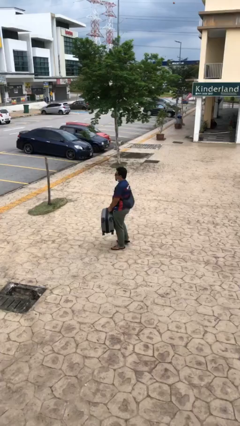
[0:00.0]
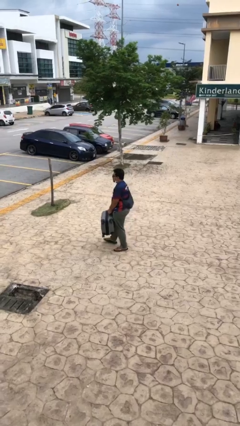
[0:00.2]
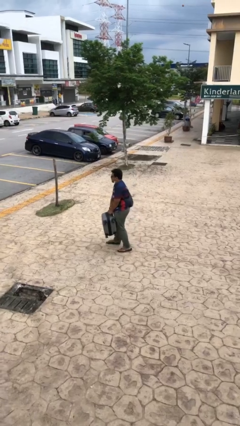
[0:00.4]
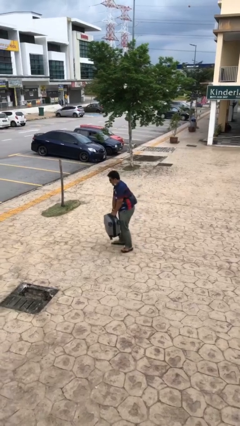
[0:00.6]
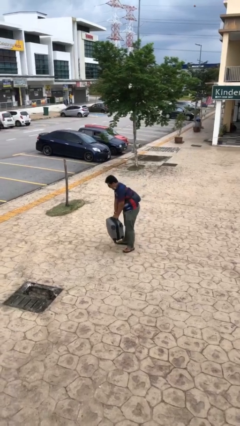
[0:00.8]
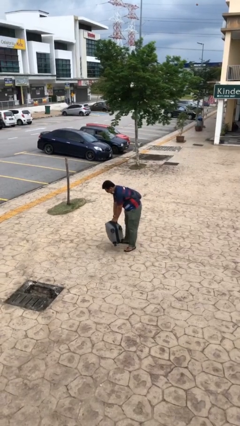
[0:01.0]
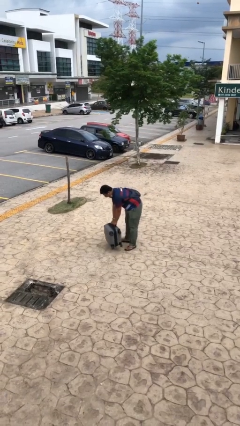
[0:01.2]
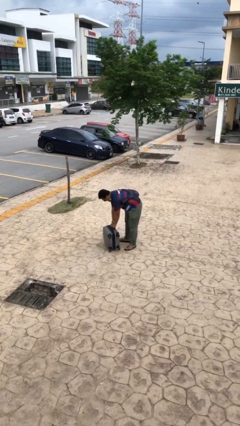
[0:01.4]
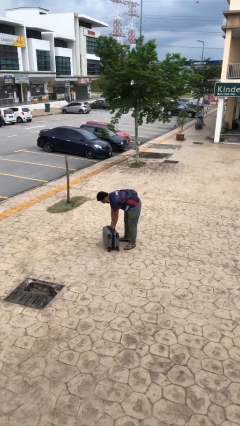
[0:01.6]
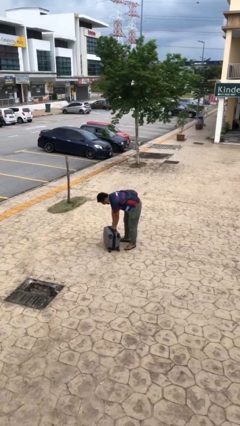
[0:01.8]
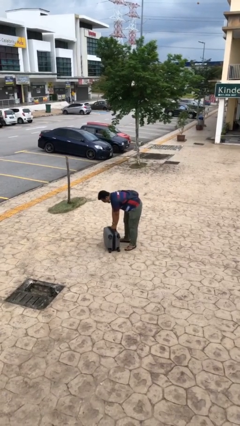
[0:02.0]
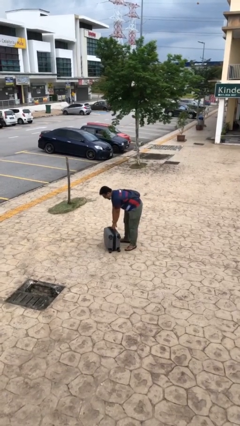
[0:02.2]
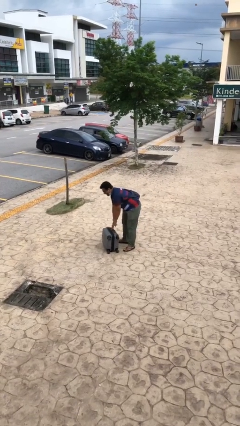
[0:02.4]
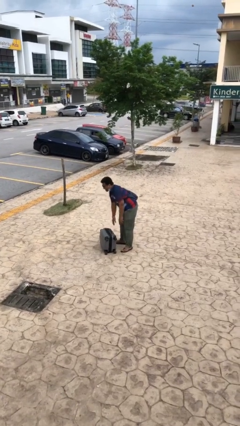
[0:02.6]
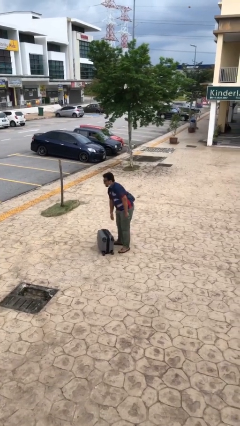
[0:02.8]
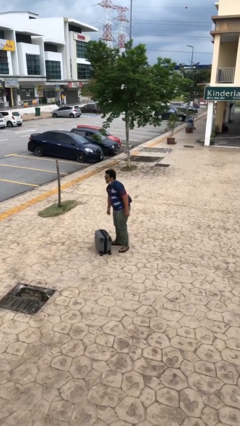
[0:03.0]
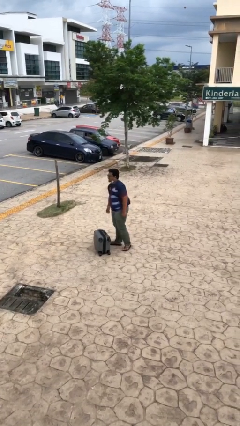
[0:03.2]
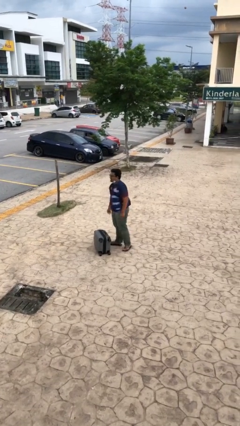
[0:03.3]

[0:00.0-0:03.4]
person puts down object on floor

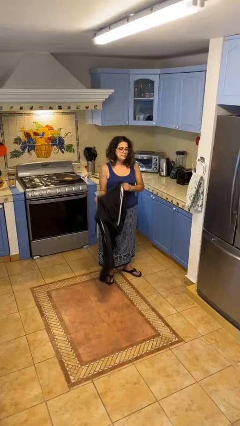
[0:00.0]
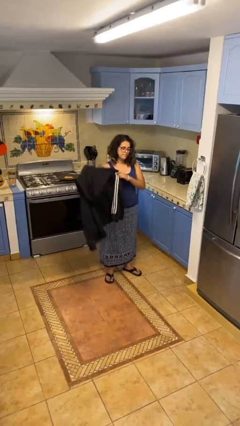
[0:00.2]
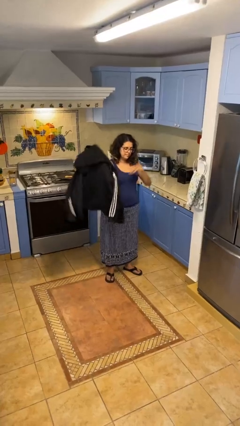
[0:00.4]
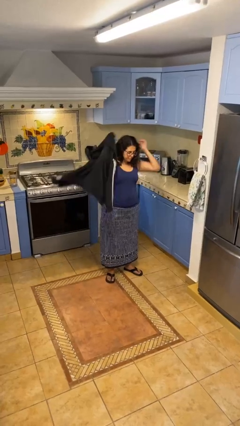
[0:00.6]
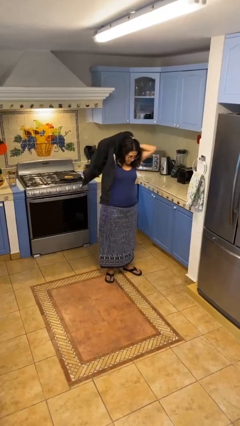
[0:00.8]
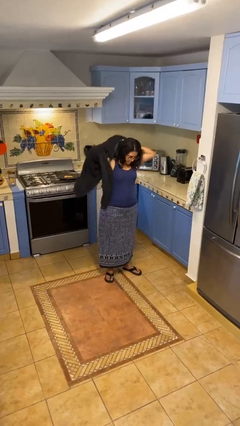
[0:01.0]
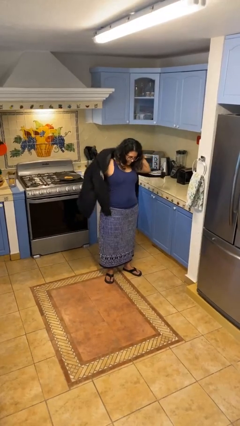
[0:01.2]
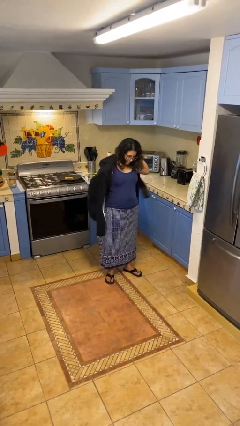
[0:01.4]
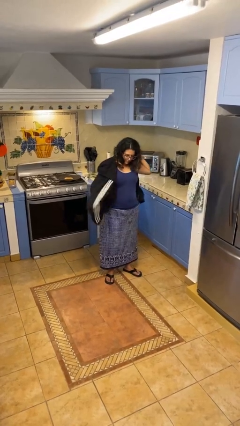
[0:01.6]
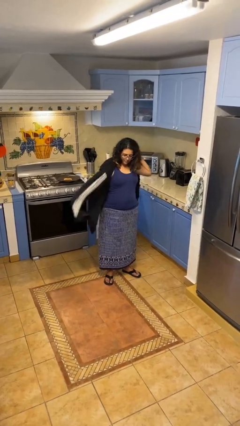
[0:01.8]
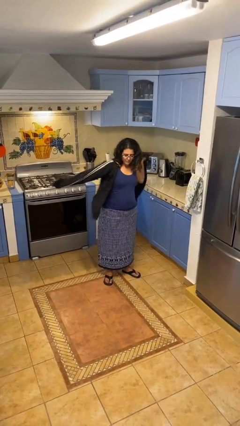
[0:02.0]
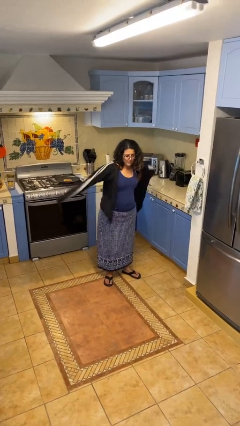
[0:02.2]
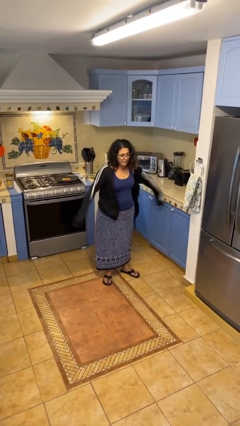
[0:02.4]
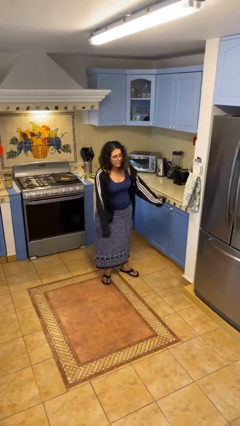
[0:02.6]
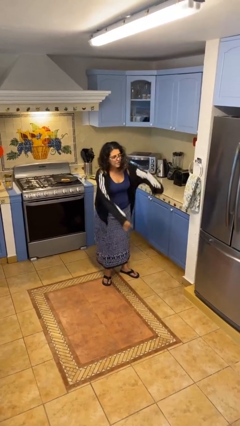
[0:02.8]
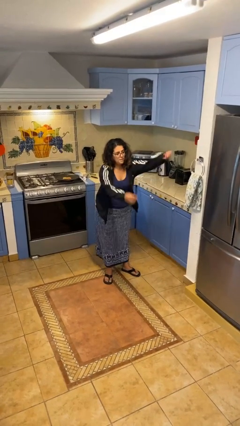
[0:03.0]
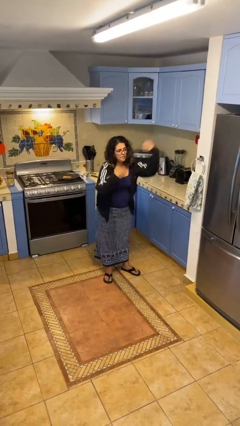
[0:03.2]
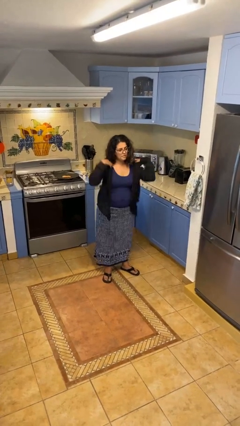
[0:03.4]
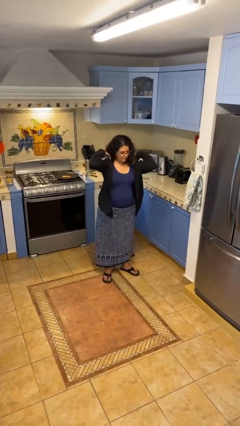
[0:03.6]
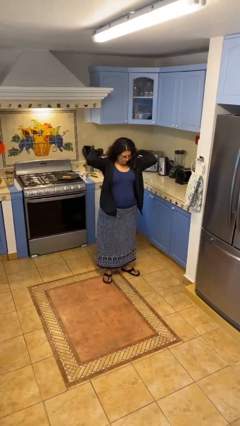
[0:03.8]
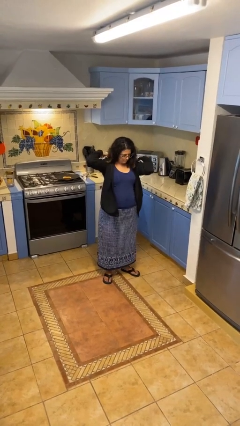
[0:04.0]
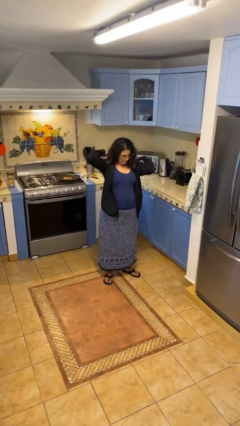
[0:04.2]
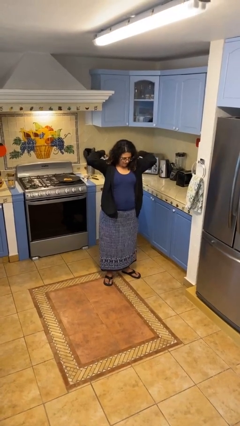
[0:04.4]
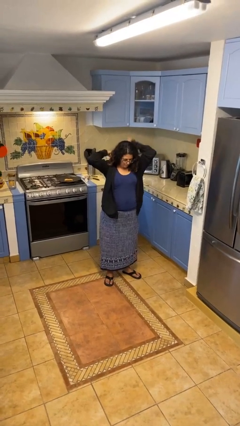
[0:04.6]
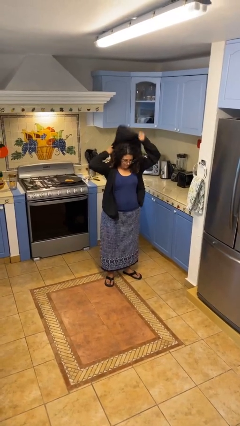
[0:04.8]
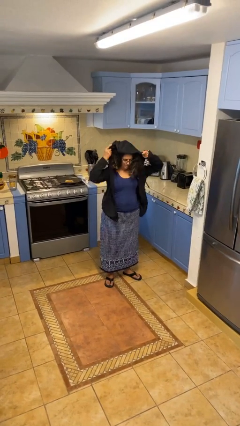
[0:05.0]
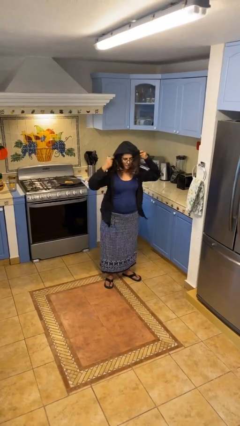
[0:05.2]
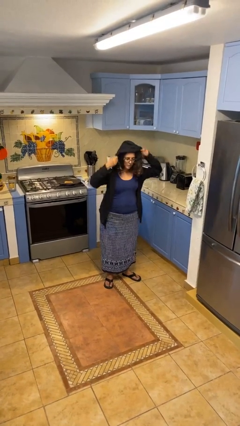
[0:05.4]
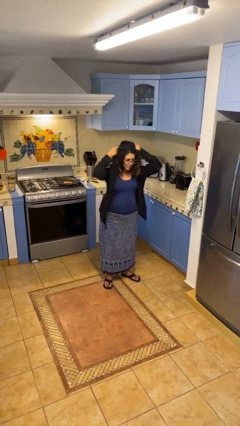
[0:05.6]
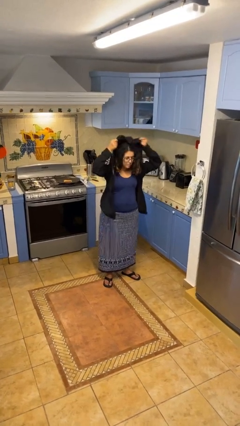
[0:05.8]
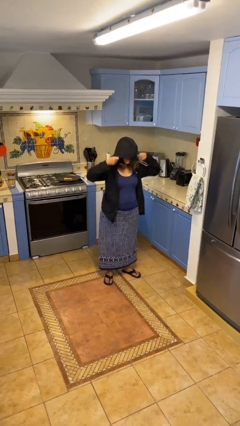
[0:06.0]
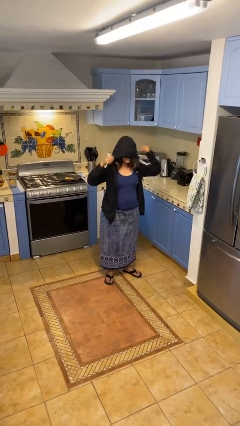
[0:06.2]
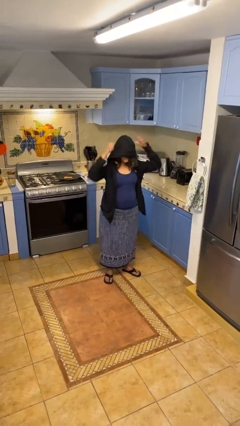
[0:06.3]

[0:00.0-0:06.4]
person puts on hoodie

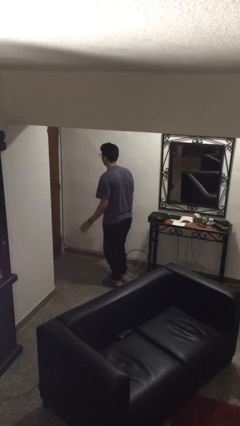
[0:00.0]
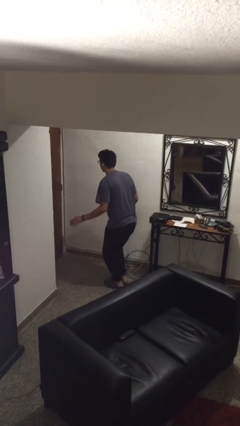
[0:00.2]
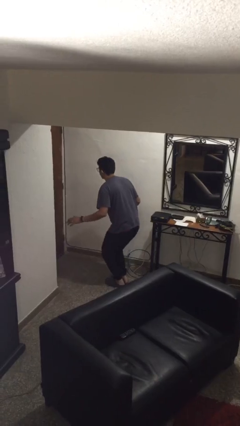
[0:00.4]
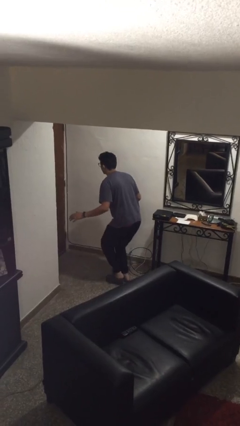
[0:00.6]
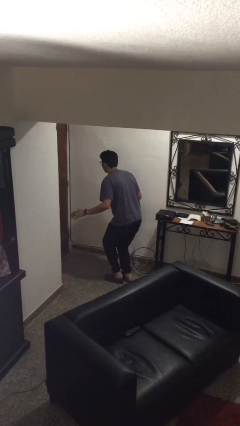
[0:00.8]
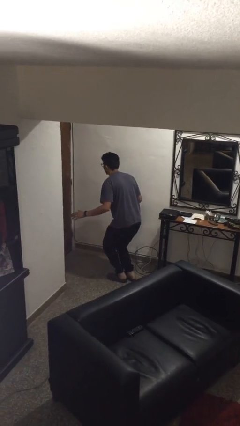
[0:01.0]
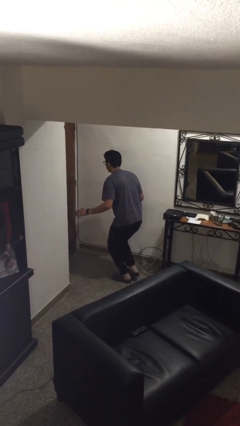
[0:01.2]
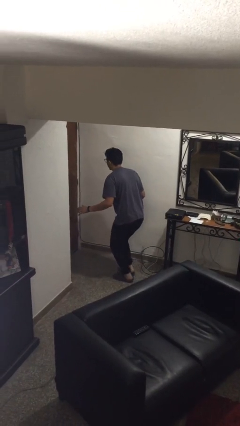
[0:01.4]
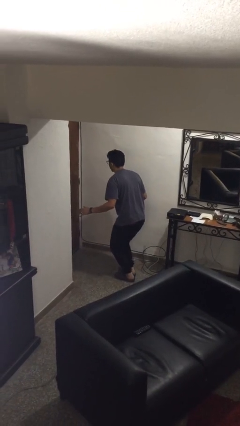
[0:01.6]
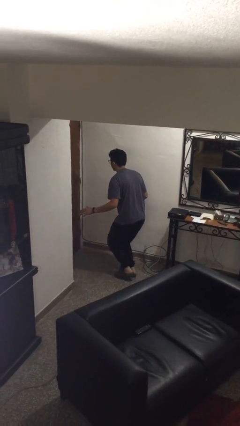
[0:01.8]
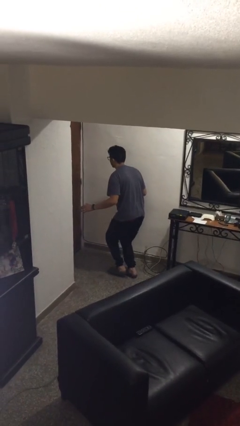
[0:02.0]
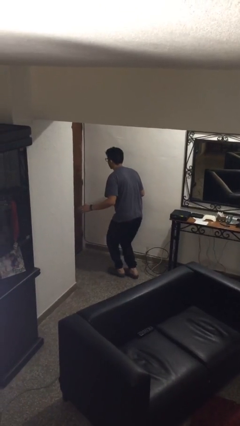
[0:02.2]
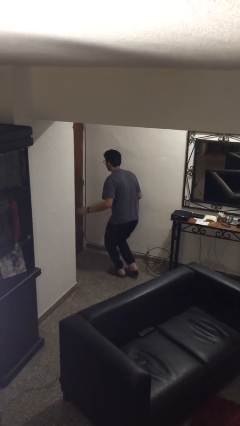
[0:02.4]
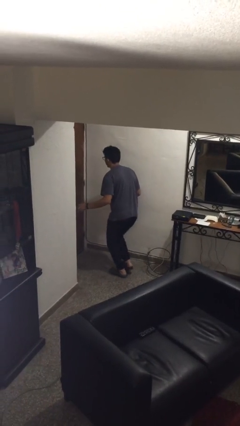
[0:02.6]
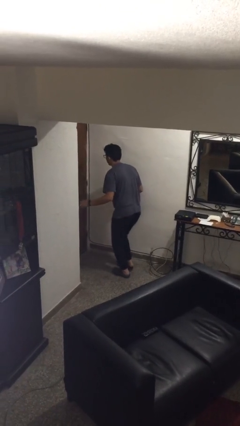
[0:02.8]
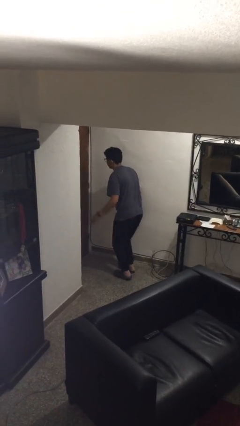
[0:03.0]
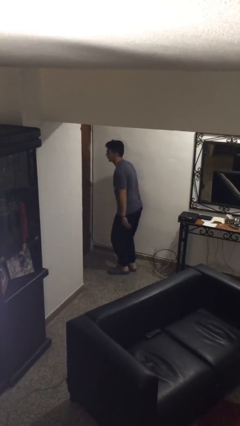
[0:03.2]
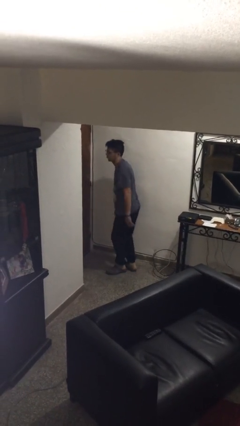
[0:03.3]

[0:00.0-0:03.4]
person walks tiptoe

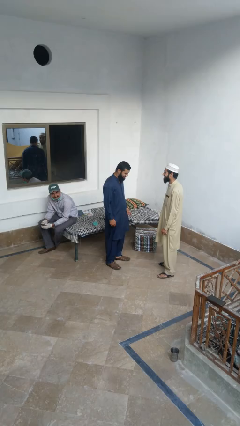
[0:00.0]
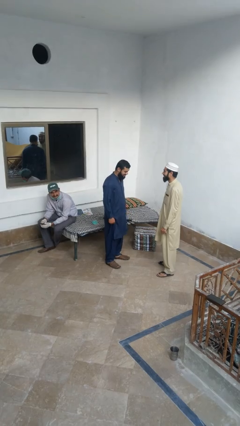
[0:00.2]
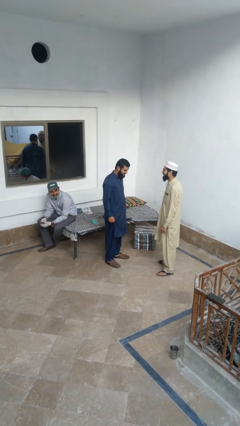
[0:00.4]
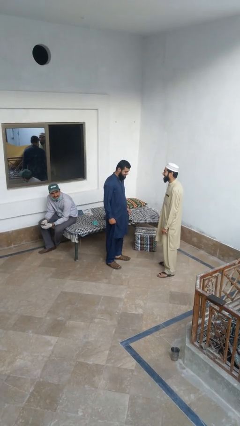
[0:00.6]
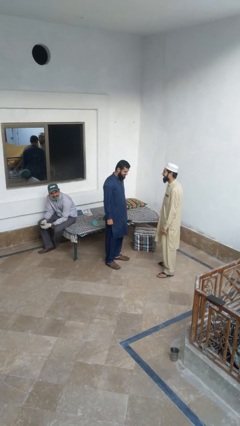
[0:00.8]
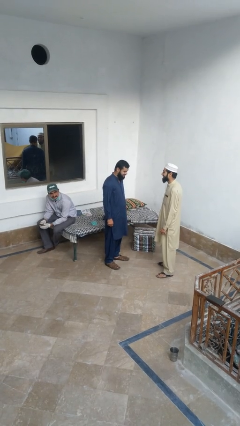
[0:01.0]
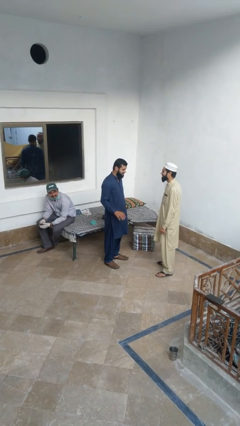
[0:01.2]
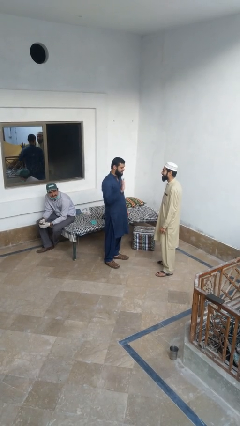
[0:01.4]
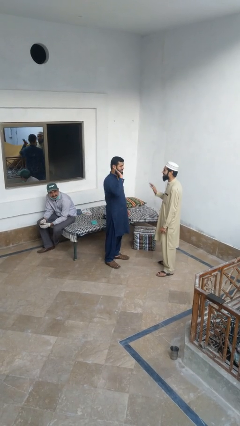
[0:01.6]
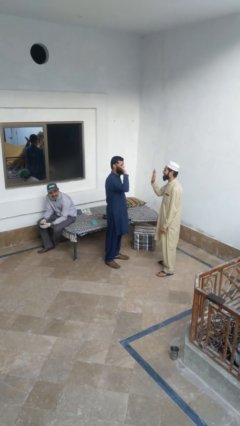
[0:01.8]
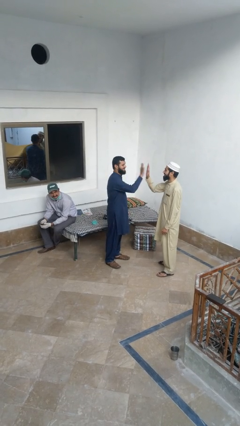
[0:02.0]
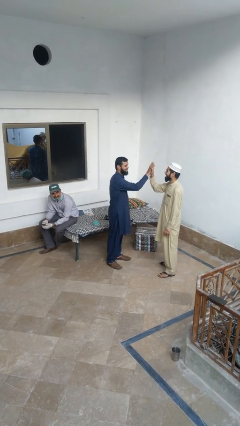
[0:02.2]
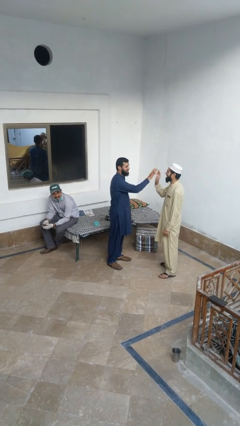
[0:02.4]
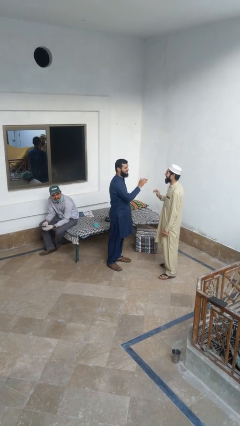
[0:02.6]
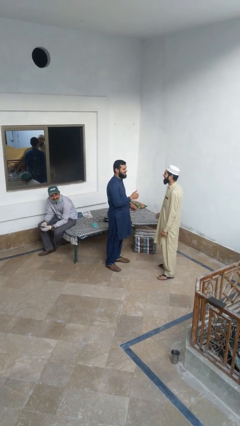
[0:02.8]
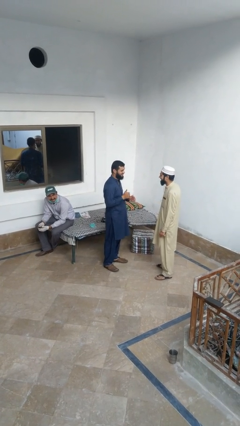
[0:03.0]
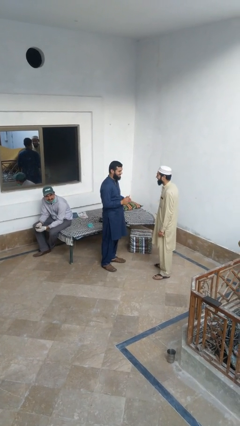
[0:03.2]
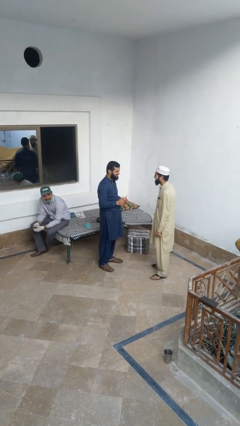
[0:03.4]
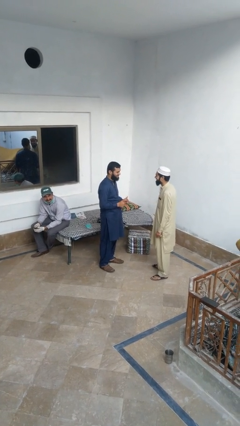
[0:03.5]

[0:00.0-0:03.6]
person highfives hand

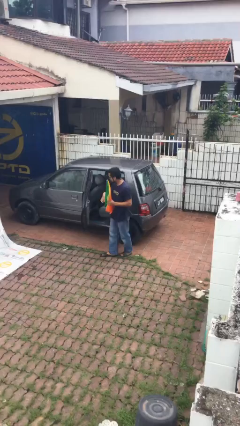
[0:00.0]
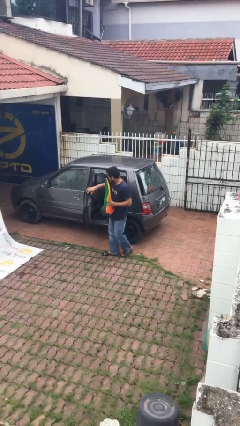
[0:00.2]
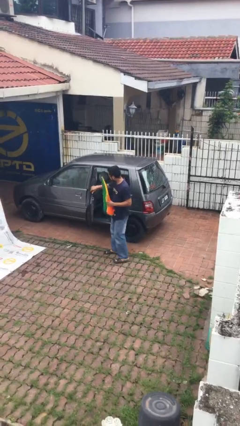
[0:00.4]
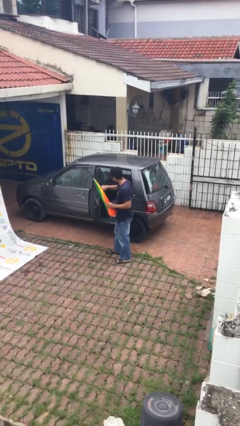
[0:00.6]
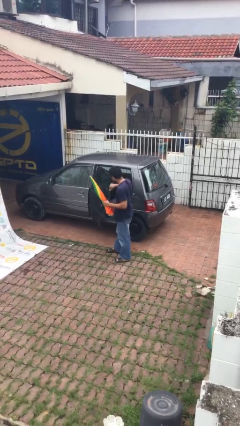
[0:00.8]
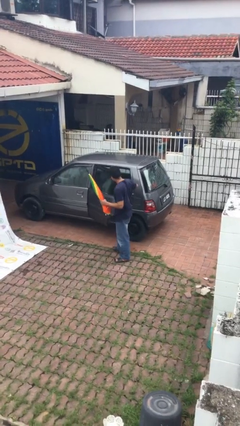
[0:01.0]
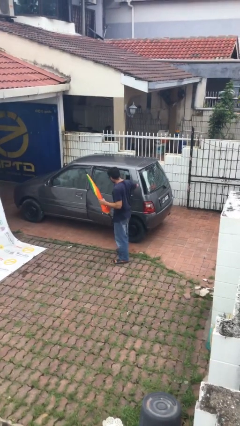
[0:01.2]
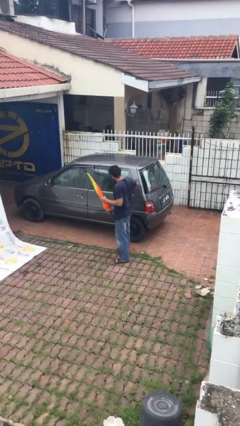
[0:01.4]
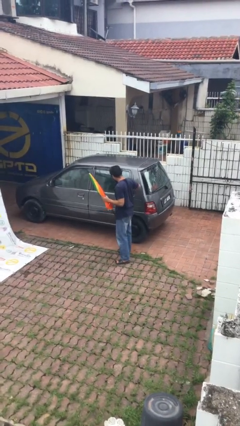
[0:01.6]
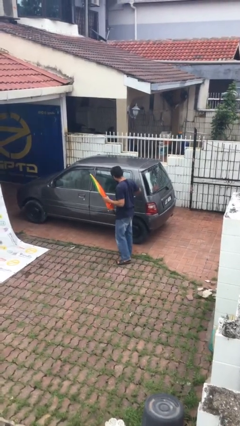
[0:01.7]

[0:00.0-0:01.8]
person closes car door
